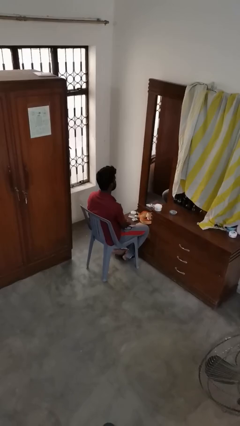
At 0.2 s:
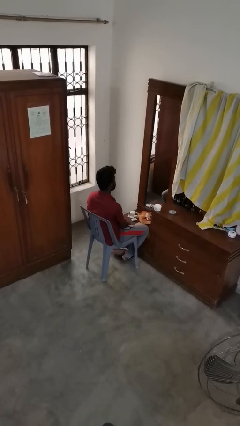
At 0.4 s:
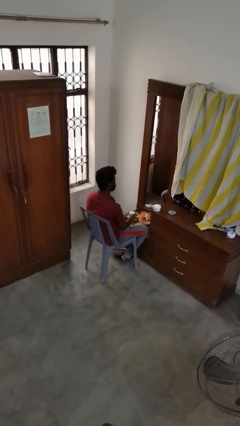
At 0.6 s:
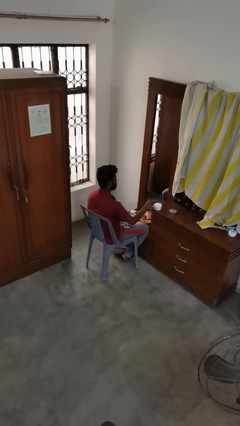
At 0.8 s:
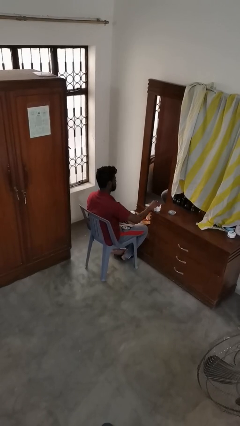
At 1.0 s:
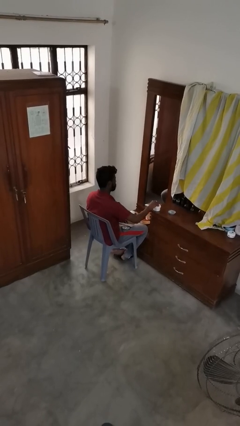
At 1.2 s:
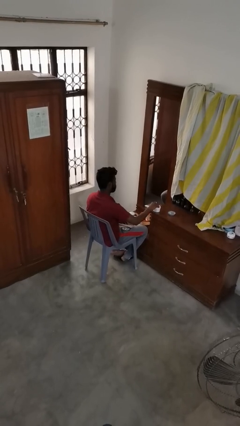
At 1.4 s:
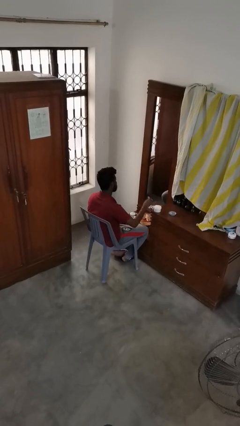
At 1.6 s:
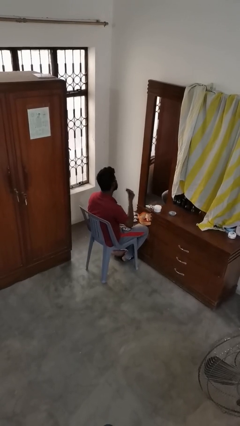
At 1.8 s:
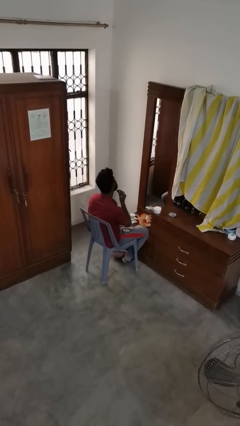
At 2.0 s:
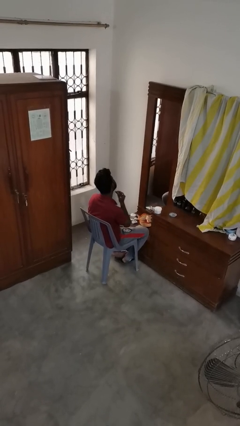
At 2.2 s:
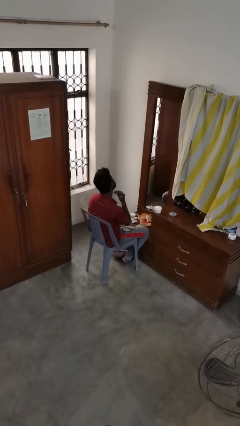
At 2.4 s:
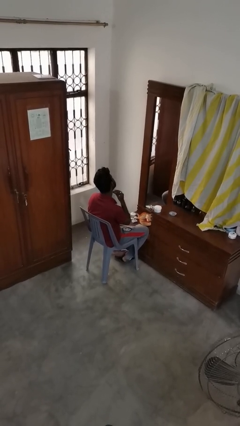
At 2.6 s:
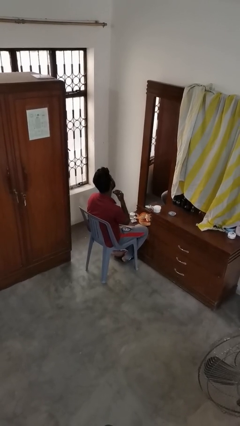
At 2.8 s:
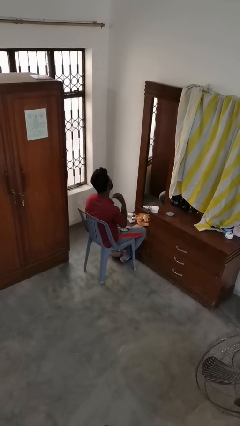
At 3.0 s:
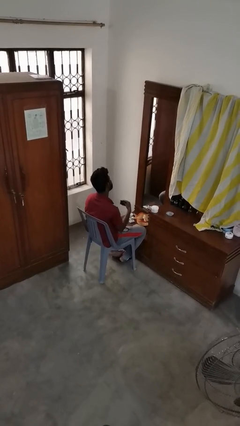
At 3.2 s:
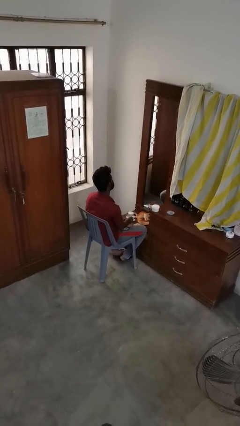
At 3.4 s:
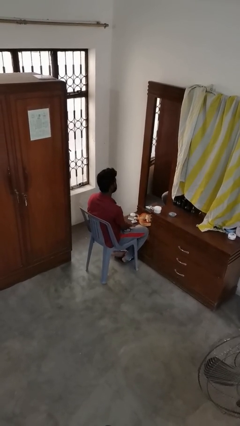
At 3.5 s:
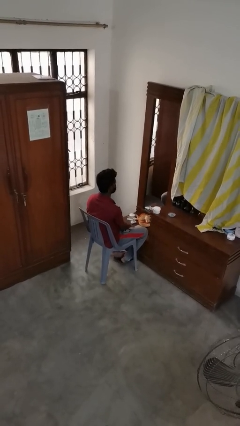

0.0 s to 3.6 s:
person applies foundation makeup

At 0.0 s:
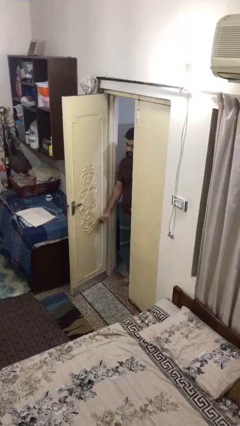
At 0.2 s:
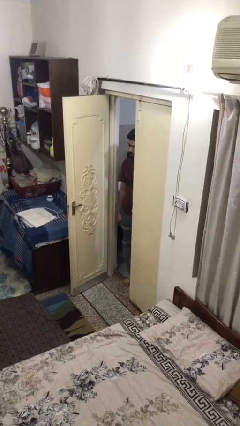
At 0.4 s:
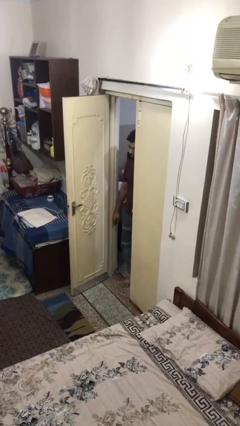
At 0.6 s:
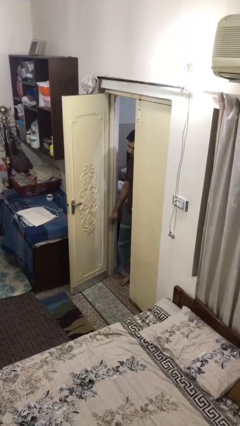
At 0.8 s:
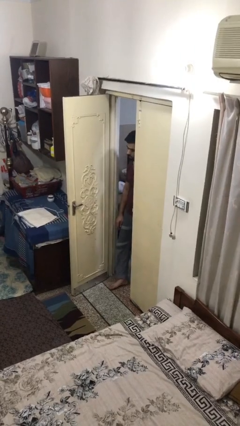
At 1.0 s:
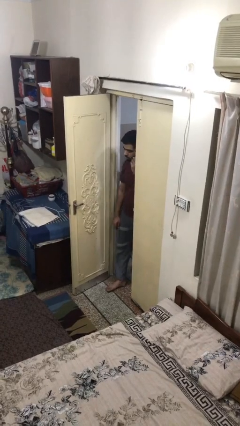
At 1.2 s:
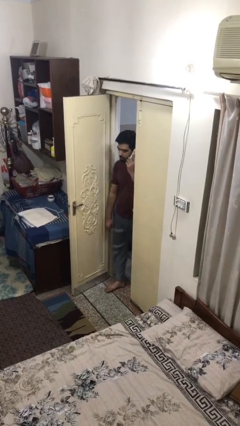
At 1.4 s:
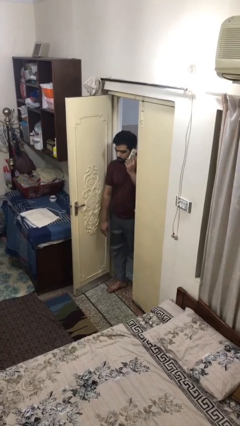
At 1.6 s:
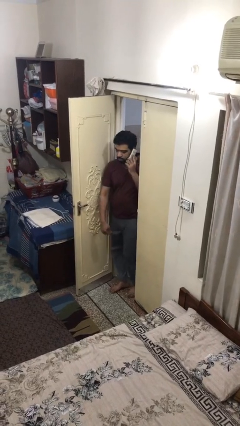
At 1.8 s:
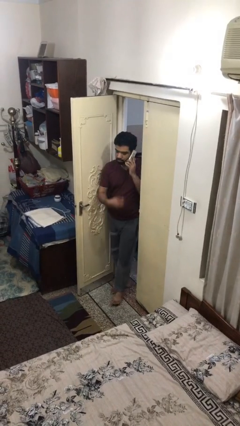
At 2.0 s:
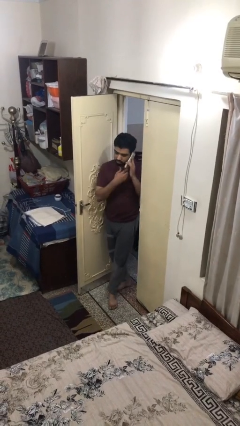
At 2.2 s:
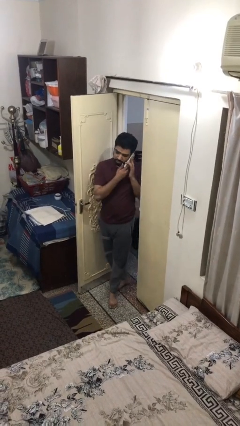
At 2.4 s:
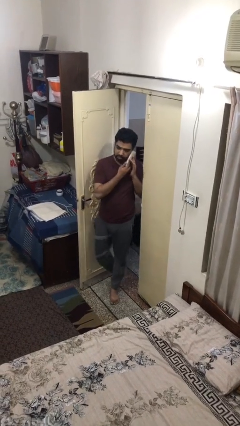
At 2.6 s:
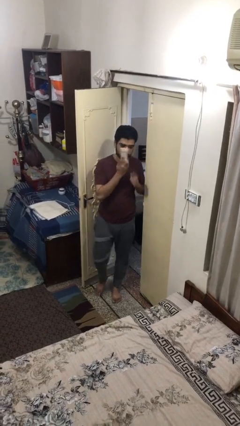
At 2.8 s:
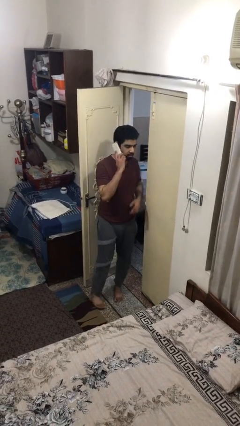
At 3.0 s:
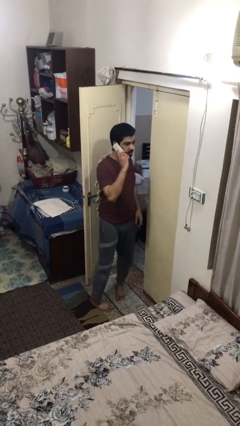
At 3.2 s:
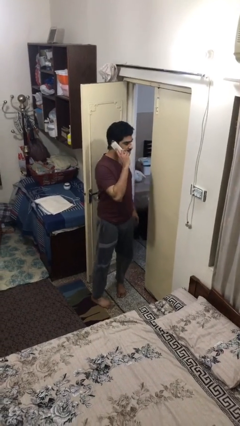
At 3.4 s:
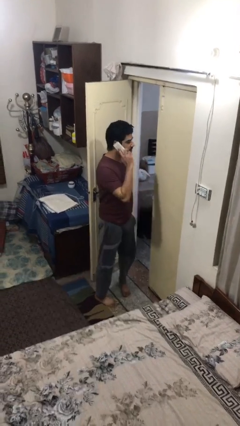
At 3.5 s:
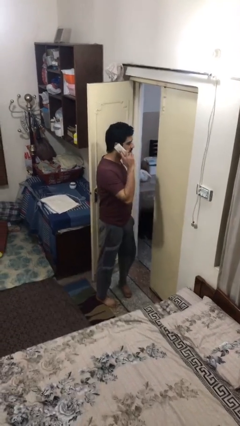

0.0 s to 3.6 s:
person enters scene through structure

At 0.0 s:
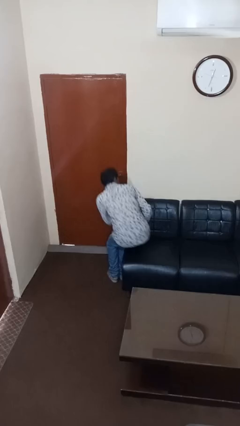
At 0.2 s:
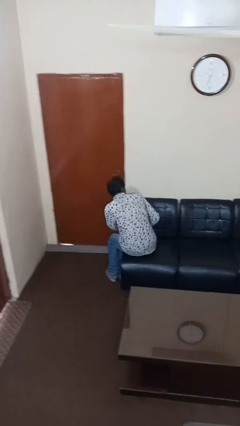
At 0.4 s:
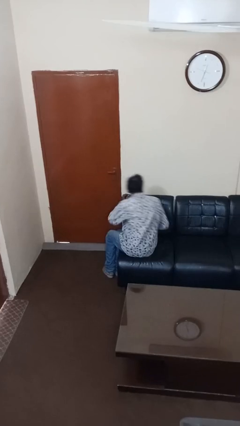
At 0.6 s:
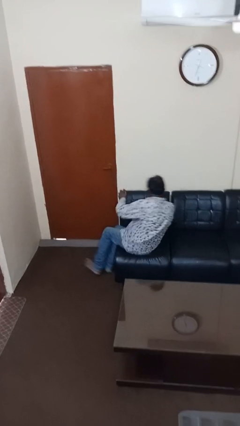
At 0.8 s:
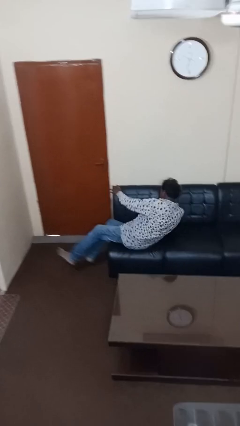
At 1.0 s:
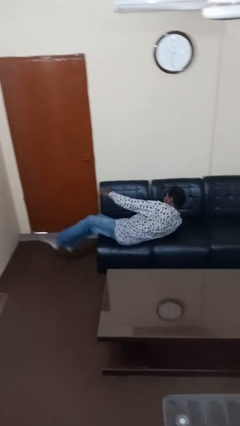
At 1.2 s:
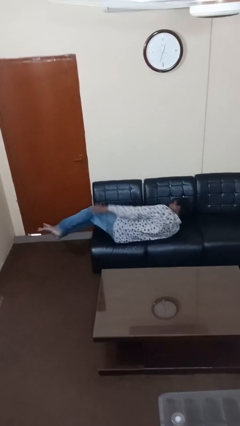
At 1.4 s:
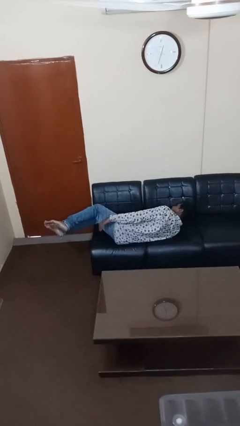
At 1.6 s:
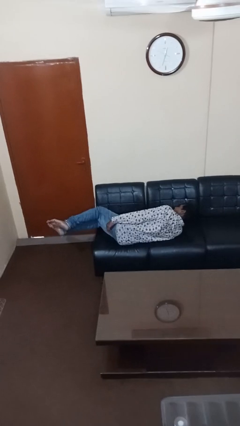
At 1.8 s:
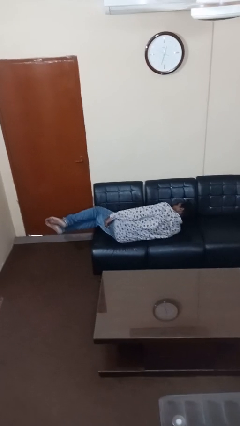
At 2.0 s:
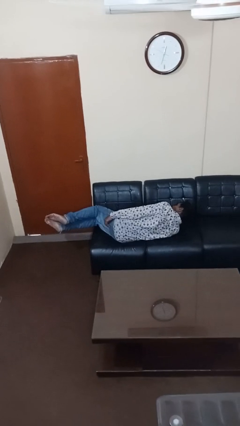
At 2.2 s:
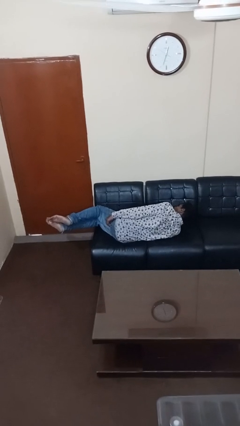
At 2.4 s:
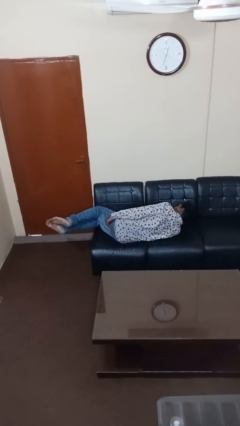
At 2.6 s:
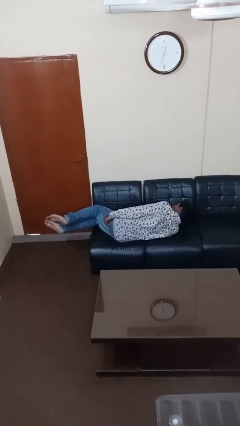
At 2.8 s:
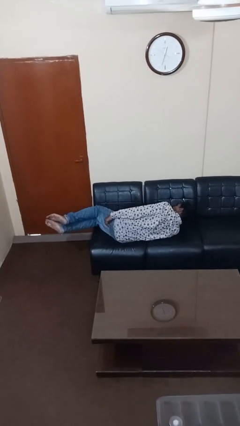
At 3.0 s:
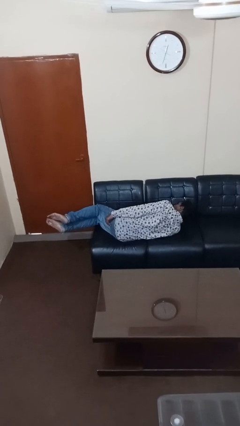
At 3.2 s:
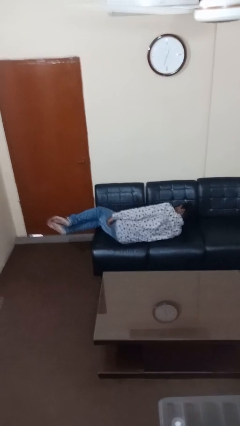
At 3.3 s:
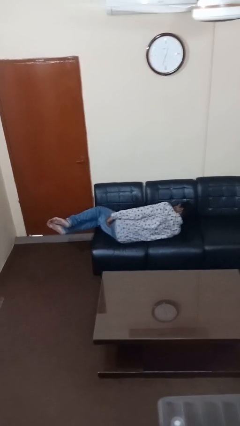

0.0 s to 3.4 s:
person lies down on couch

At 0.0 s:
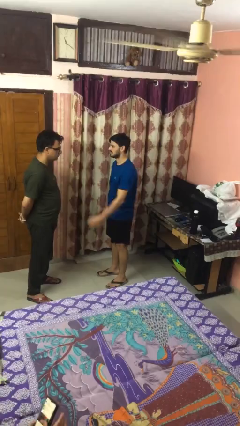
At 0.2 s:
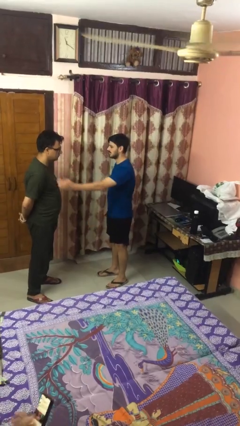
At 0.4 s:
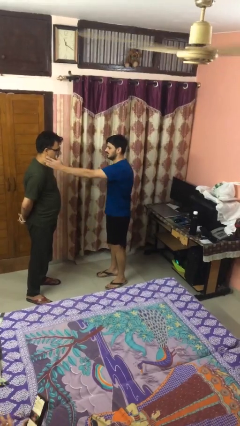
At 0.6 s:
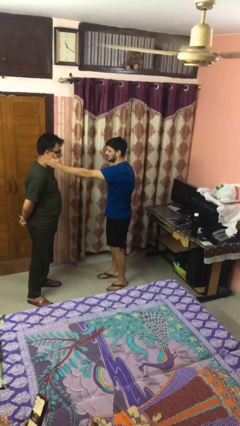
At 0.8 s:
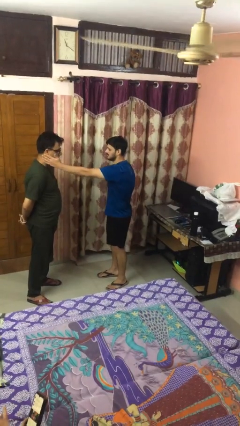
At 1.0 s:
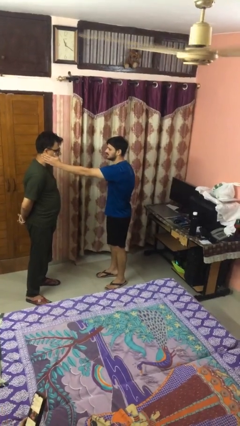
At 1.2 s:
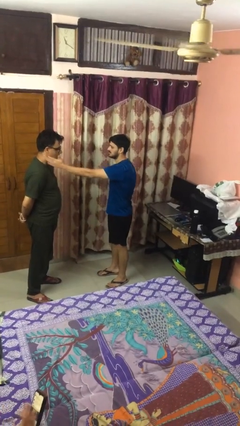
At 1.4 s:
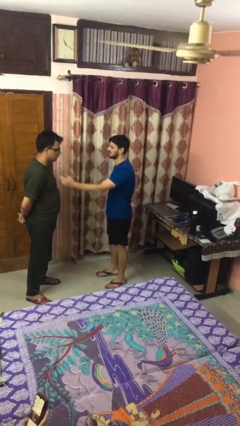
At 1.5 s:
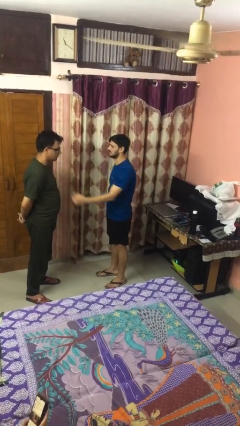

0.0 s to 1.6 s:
person touches face of person

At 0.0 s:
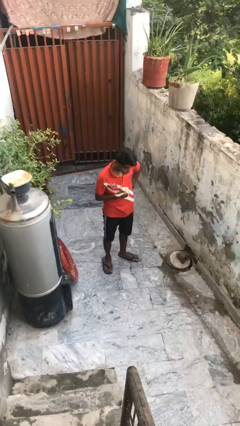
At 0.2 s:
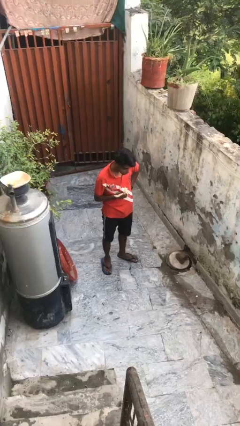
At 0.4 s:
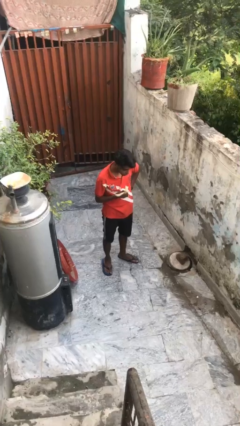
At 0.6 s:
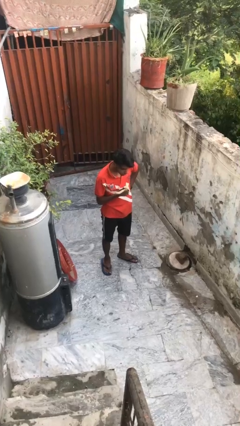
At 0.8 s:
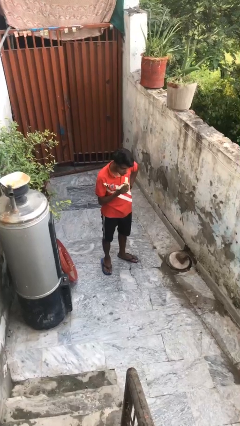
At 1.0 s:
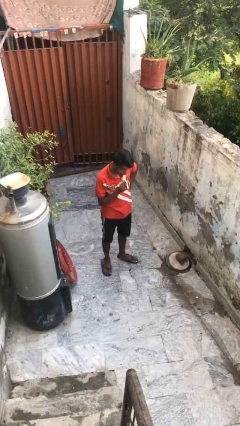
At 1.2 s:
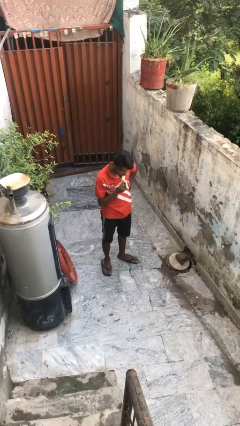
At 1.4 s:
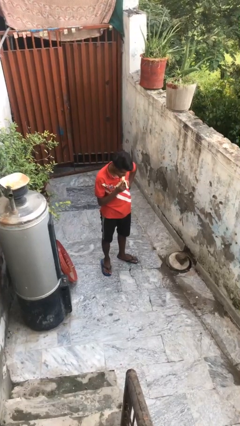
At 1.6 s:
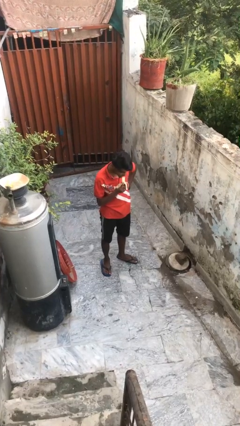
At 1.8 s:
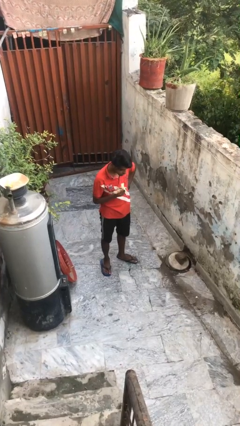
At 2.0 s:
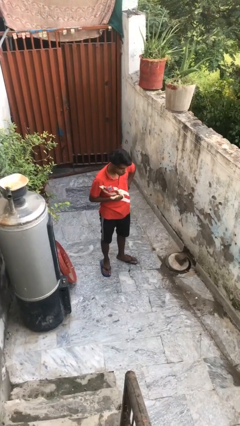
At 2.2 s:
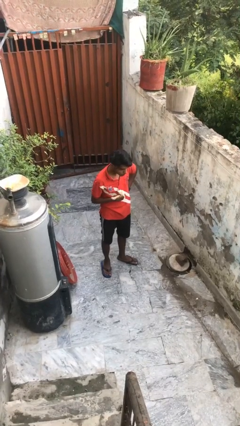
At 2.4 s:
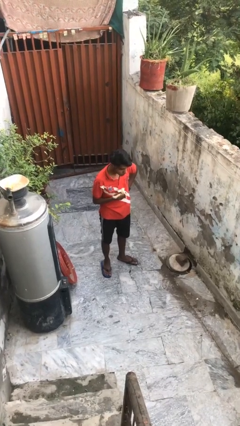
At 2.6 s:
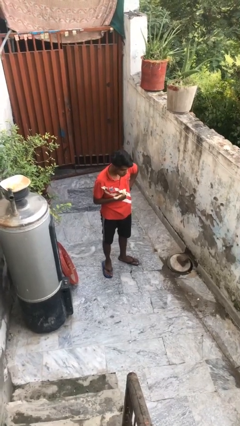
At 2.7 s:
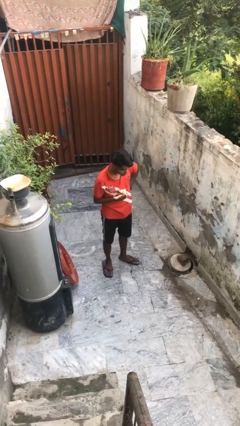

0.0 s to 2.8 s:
person eats banana

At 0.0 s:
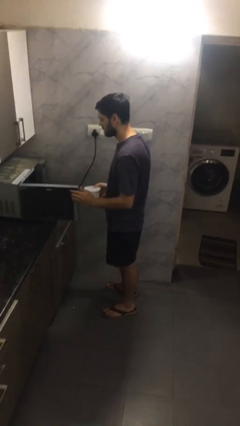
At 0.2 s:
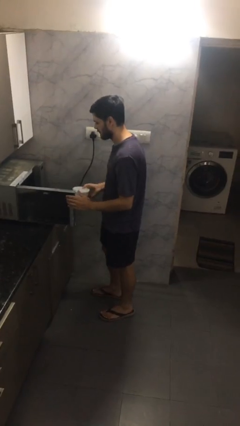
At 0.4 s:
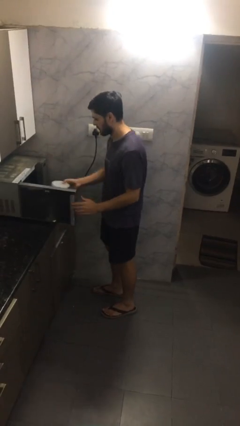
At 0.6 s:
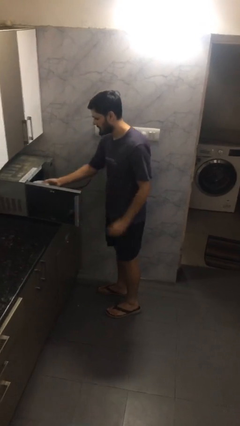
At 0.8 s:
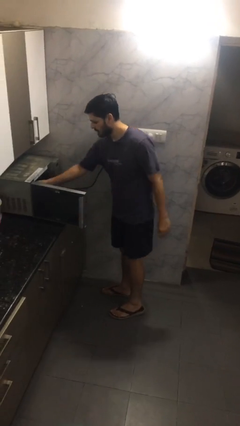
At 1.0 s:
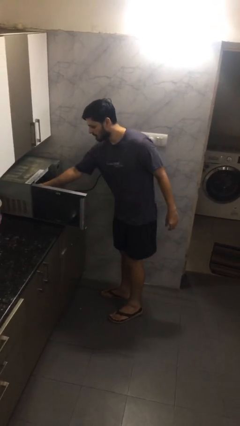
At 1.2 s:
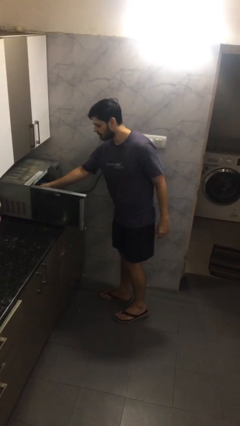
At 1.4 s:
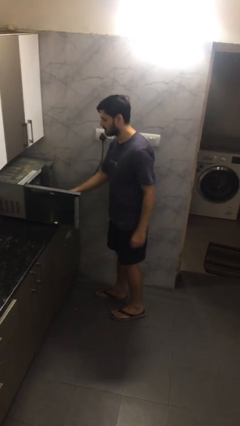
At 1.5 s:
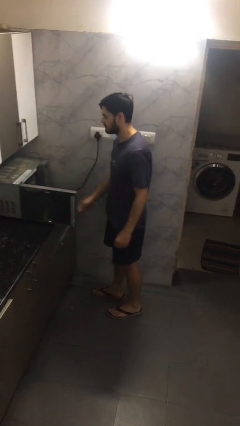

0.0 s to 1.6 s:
person puts object into microwave

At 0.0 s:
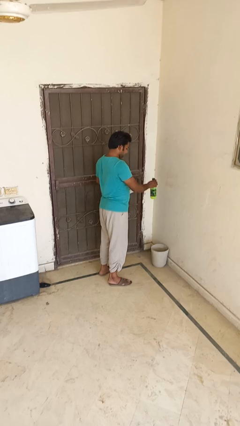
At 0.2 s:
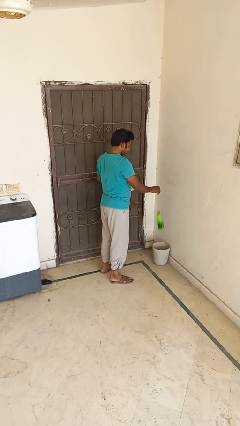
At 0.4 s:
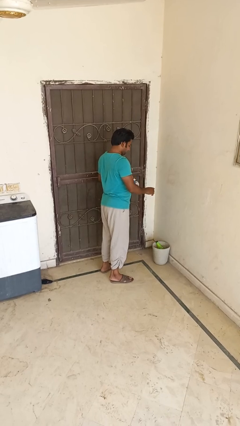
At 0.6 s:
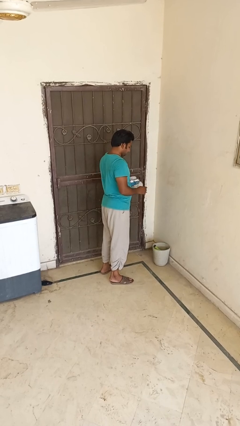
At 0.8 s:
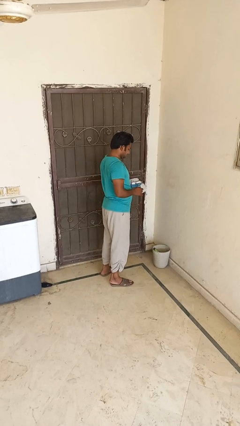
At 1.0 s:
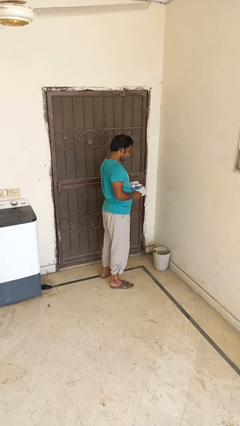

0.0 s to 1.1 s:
person discards trash
